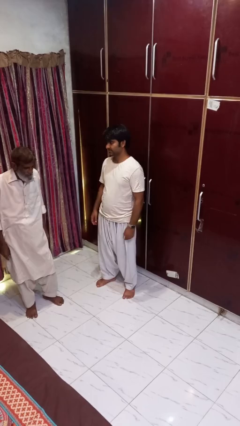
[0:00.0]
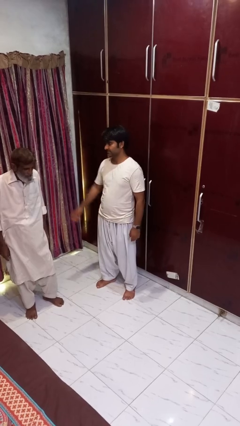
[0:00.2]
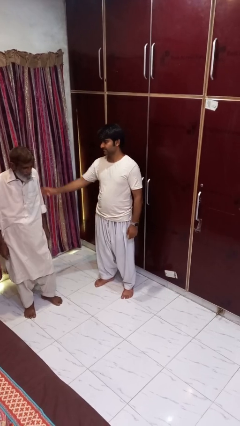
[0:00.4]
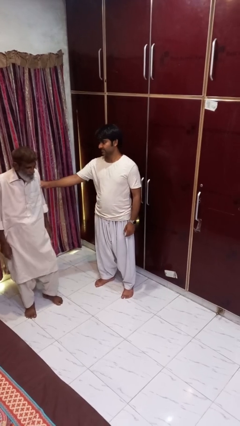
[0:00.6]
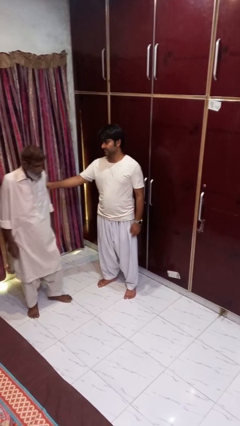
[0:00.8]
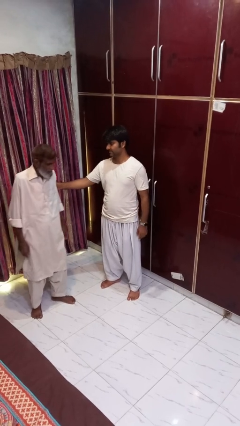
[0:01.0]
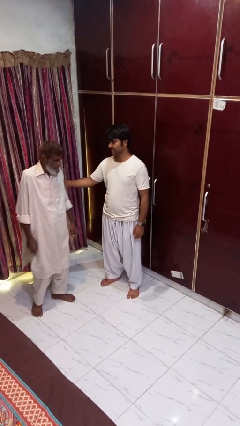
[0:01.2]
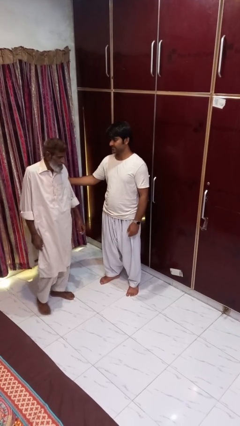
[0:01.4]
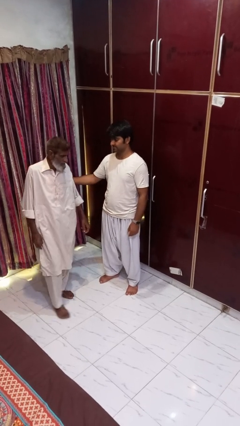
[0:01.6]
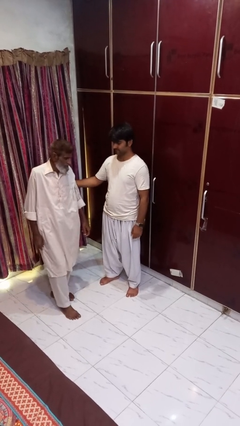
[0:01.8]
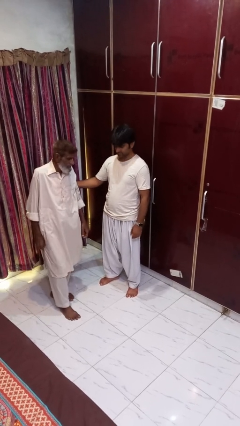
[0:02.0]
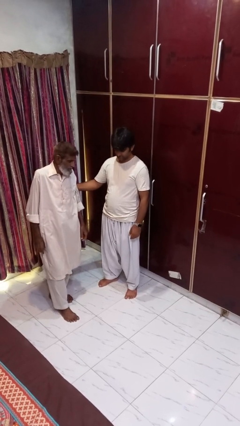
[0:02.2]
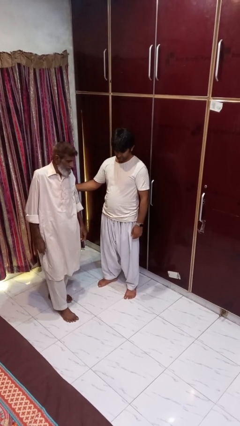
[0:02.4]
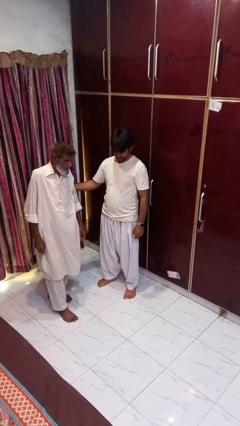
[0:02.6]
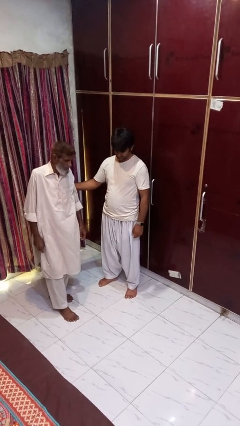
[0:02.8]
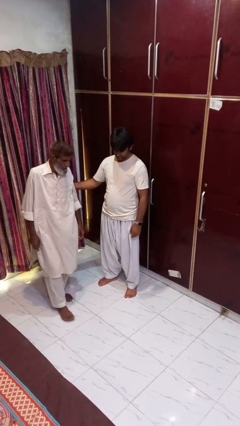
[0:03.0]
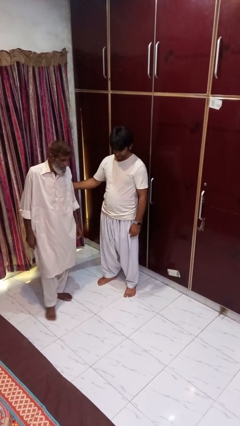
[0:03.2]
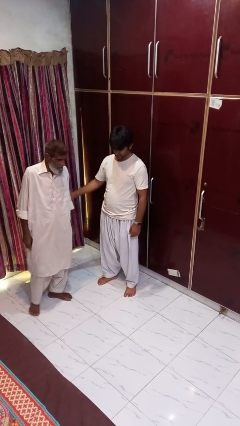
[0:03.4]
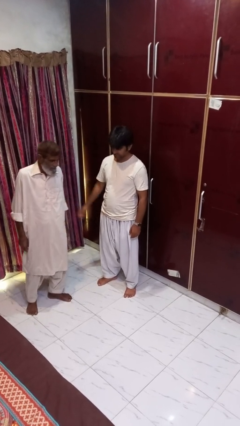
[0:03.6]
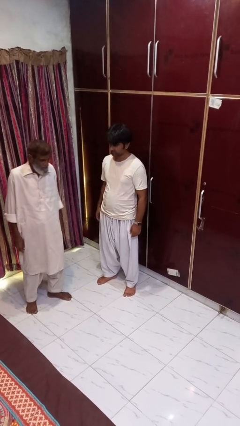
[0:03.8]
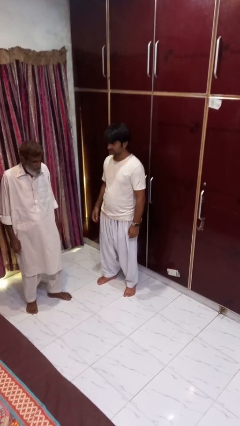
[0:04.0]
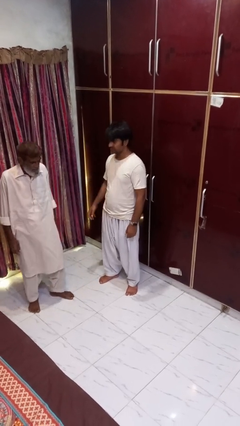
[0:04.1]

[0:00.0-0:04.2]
person grabs person by bicep

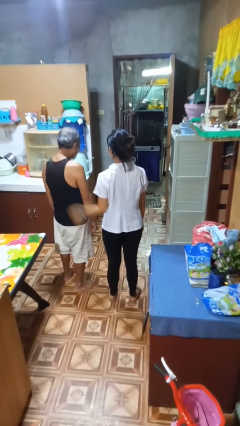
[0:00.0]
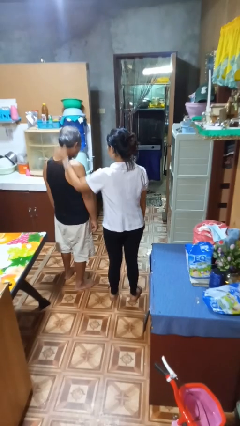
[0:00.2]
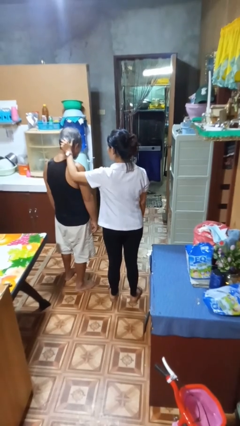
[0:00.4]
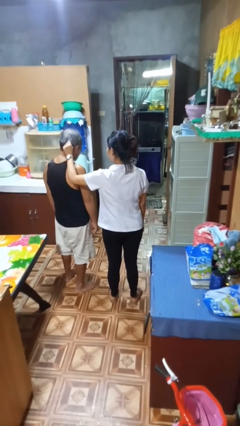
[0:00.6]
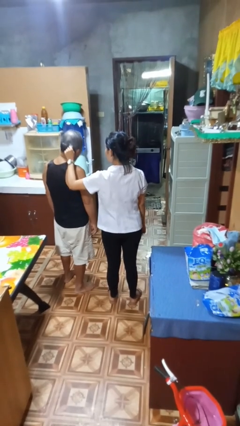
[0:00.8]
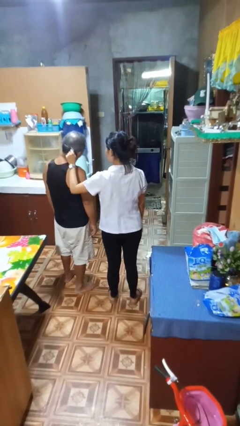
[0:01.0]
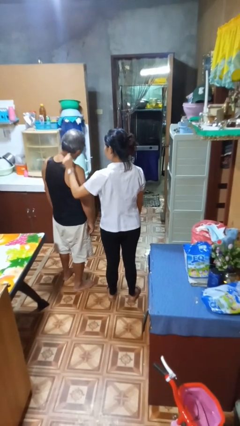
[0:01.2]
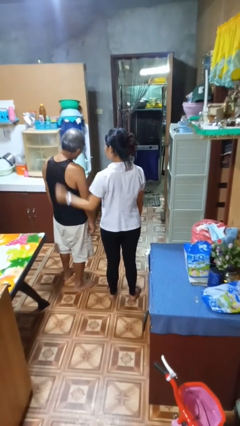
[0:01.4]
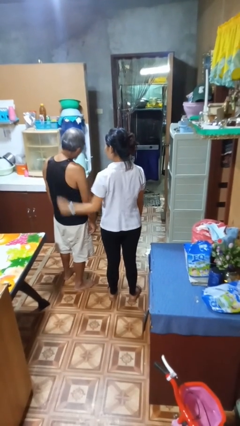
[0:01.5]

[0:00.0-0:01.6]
person grabs person by hair

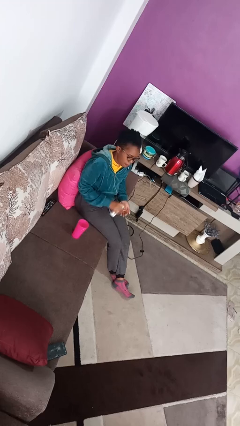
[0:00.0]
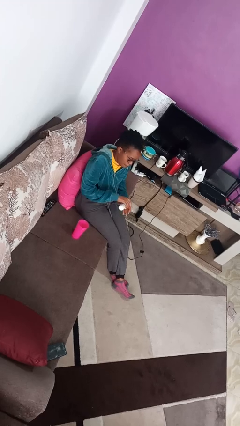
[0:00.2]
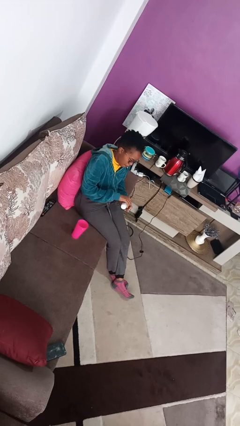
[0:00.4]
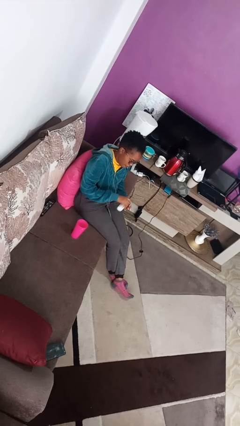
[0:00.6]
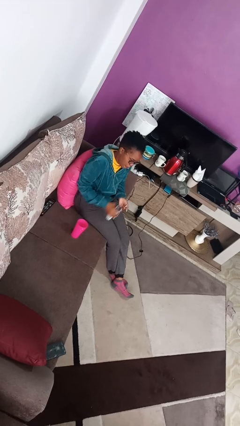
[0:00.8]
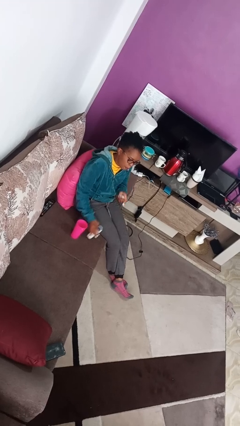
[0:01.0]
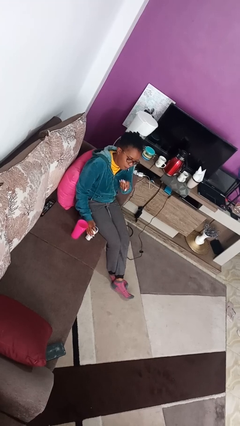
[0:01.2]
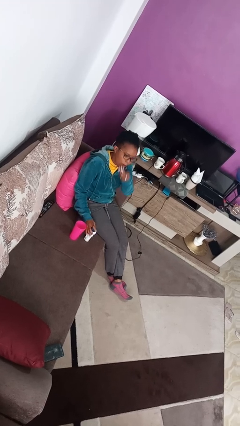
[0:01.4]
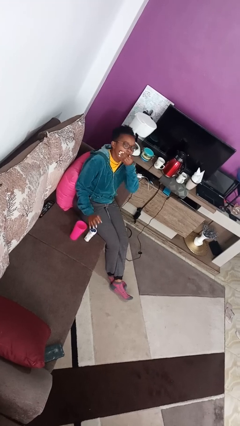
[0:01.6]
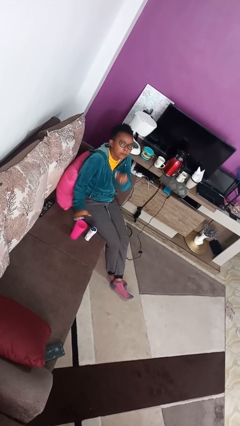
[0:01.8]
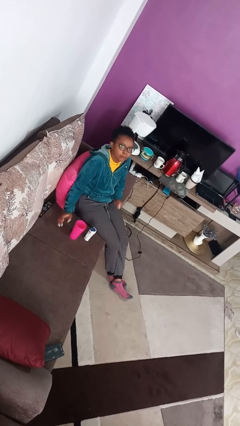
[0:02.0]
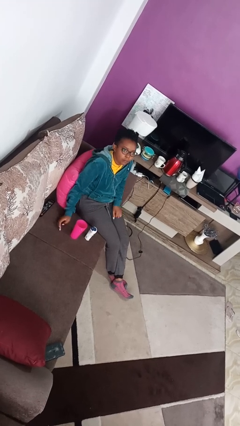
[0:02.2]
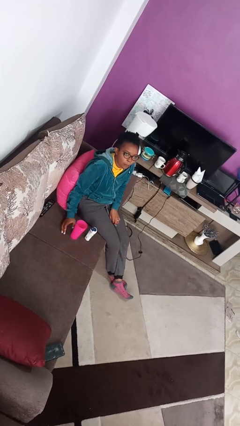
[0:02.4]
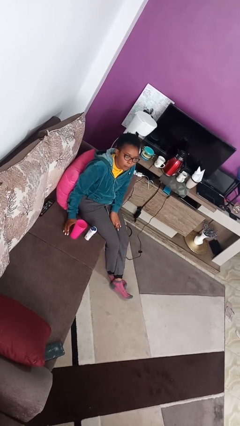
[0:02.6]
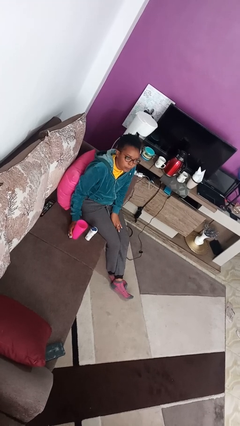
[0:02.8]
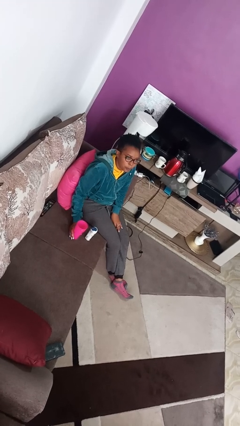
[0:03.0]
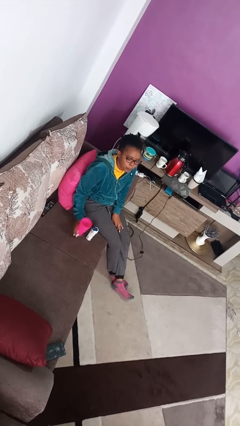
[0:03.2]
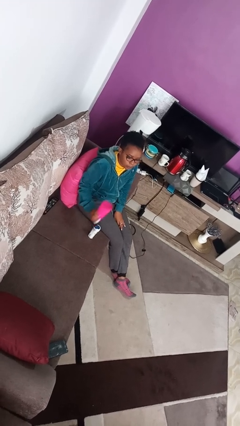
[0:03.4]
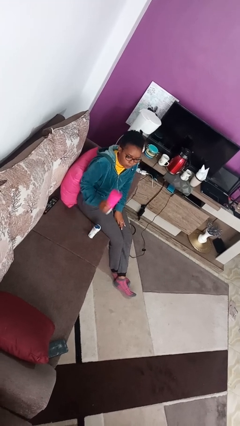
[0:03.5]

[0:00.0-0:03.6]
person takes medicine pills

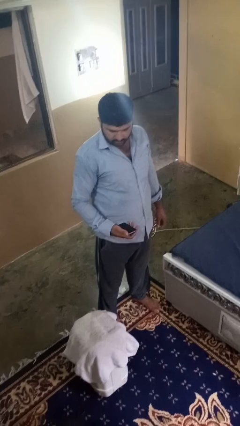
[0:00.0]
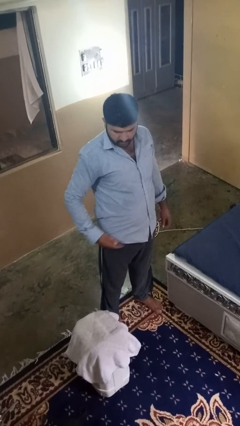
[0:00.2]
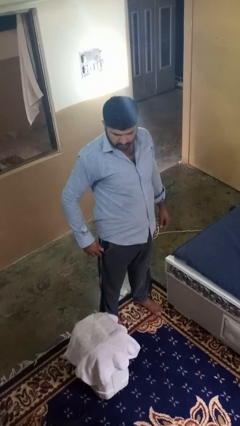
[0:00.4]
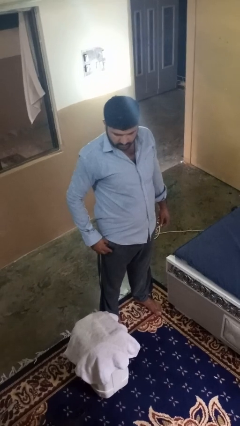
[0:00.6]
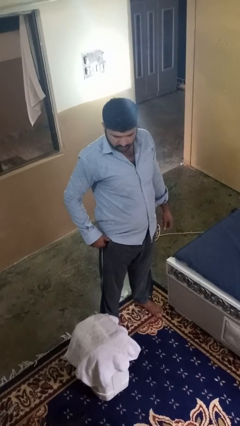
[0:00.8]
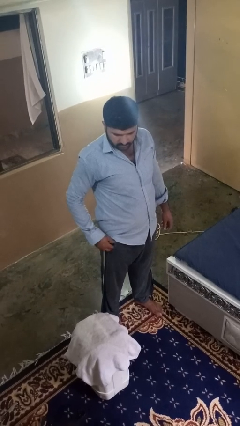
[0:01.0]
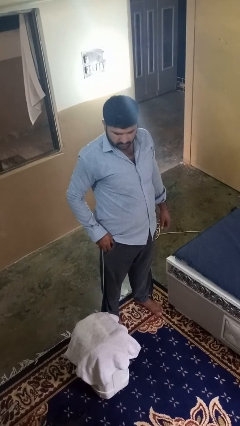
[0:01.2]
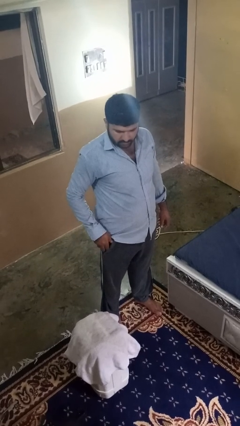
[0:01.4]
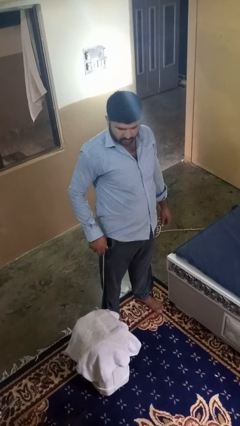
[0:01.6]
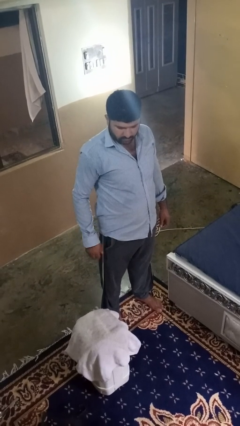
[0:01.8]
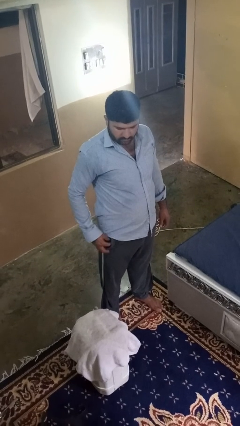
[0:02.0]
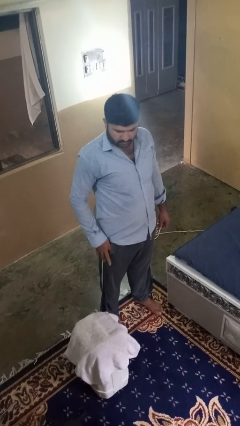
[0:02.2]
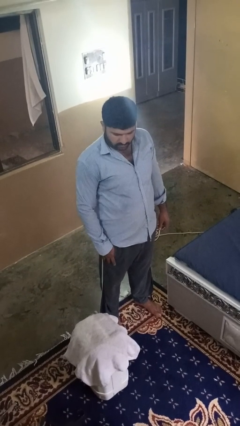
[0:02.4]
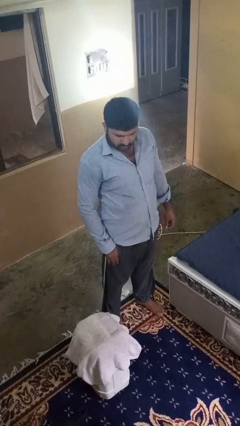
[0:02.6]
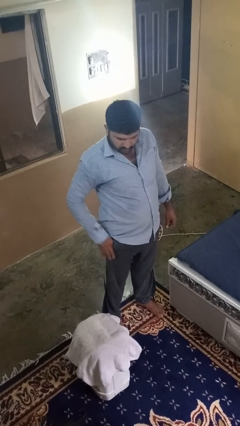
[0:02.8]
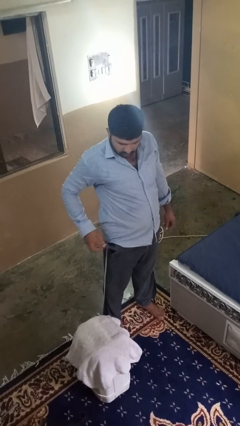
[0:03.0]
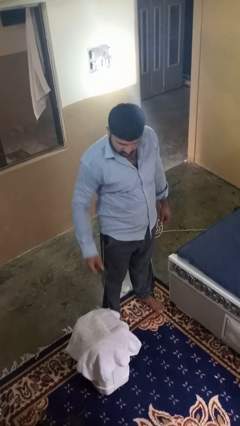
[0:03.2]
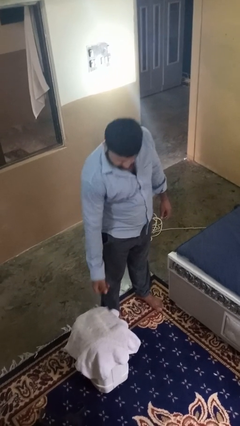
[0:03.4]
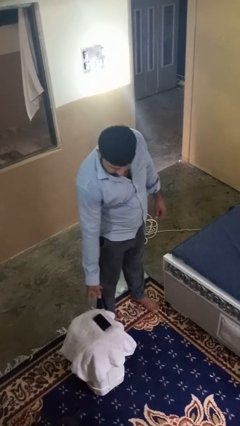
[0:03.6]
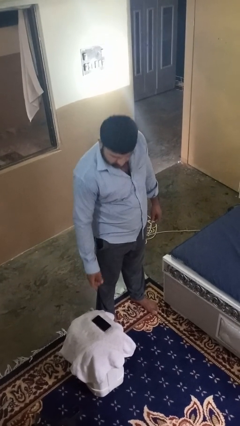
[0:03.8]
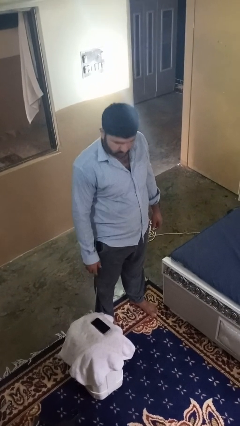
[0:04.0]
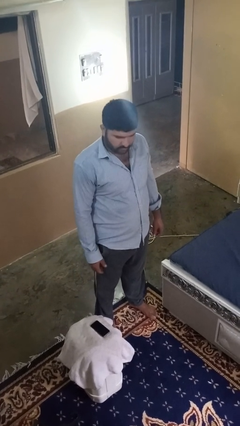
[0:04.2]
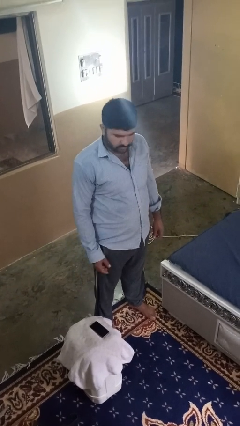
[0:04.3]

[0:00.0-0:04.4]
person puts phone into pocket

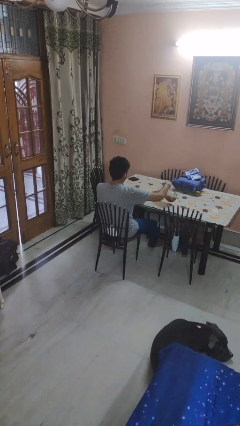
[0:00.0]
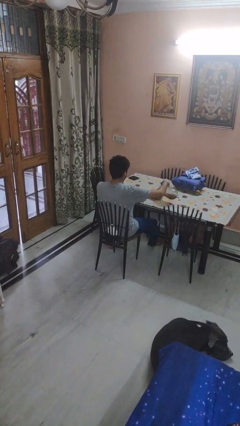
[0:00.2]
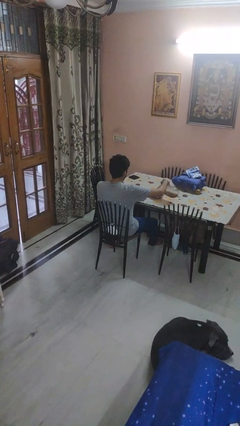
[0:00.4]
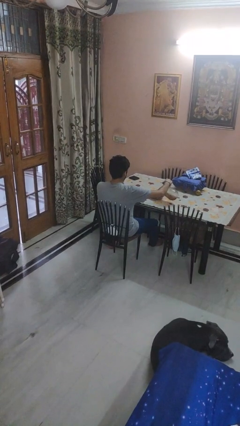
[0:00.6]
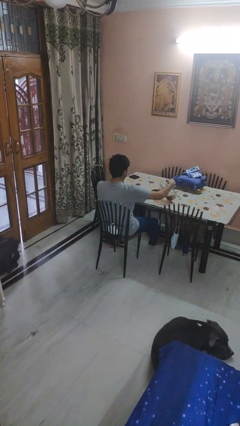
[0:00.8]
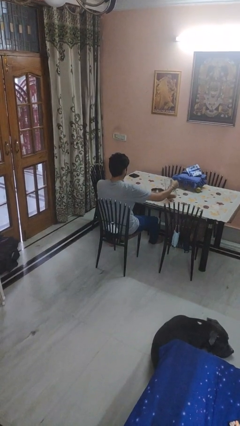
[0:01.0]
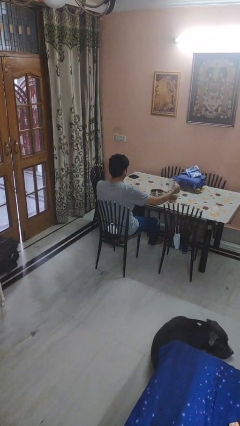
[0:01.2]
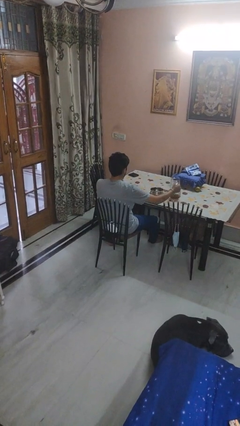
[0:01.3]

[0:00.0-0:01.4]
person pours into bowl

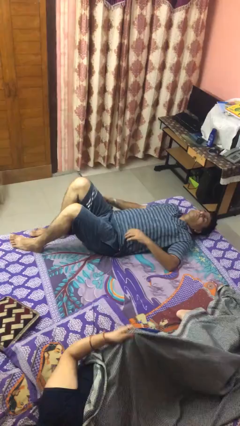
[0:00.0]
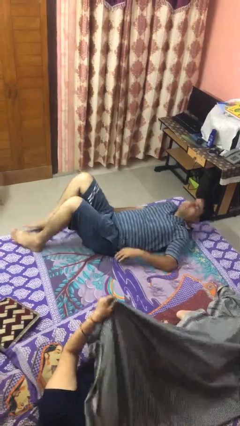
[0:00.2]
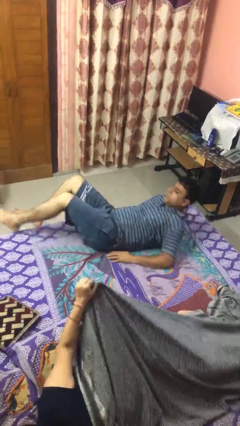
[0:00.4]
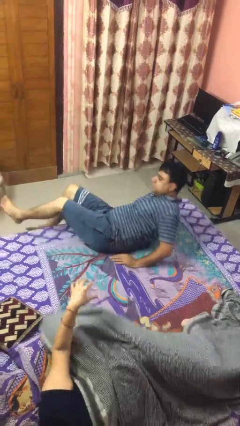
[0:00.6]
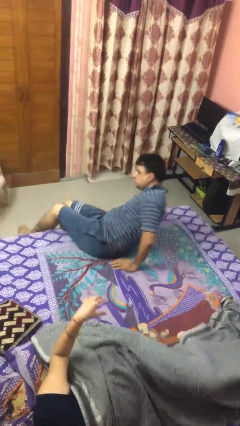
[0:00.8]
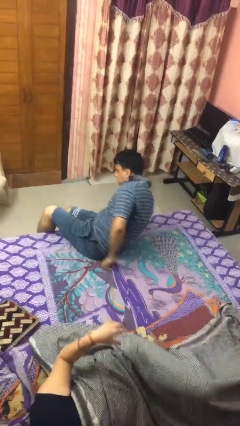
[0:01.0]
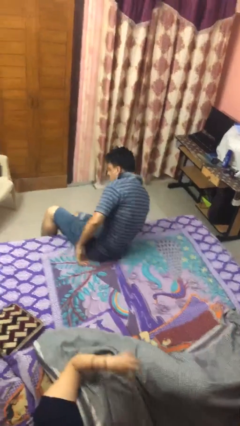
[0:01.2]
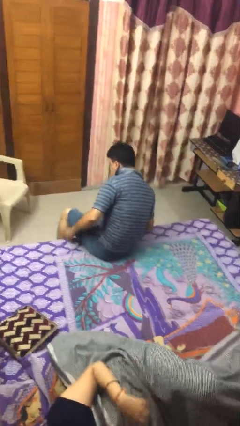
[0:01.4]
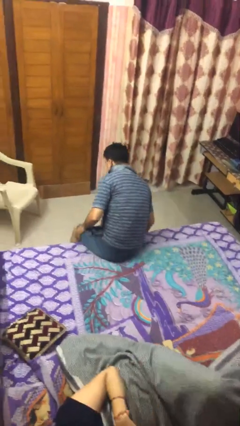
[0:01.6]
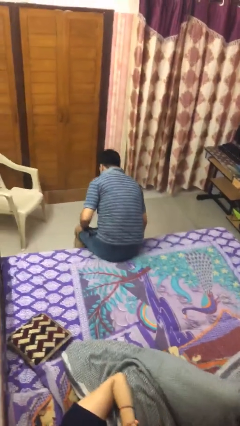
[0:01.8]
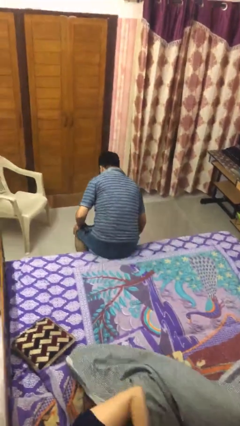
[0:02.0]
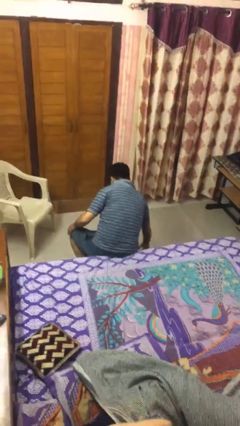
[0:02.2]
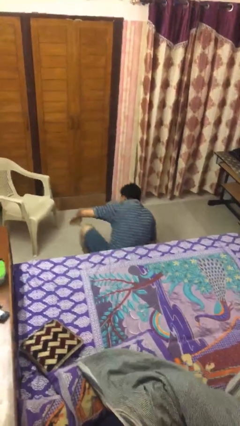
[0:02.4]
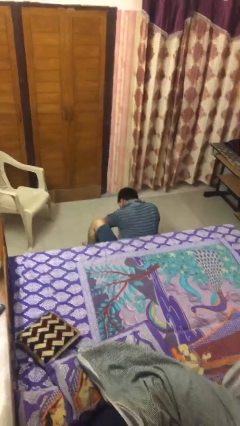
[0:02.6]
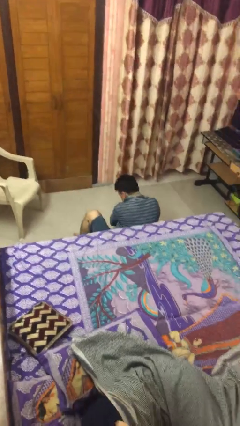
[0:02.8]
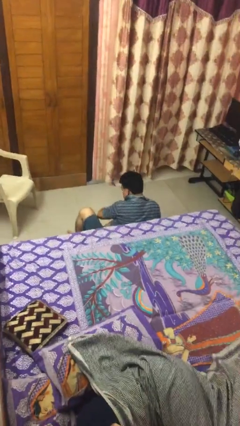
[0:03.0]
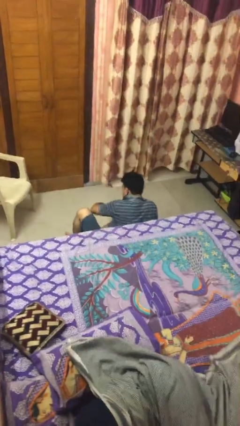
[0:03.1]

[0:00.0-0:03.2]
person falls from bed
